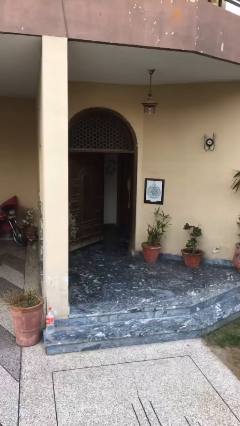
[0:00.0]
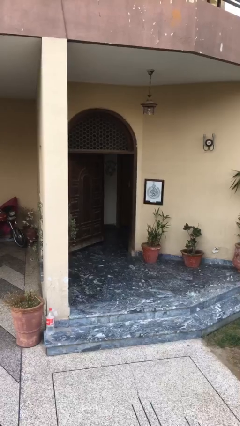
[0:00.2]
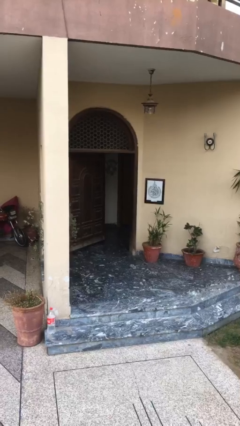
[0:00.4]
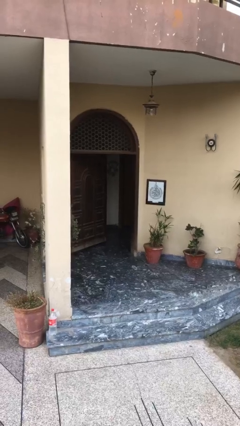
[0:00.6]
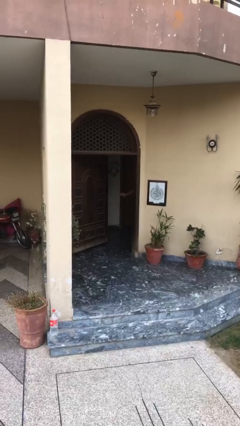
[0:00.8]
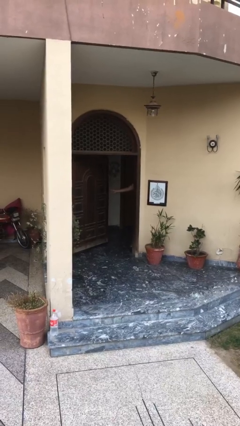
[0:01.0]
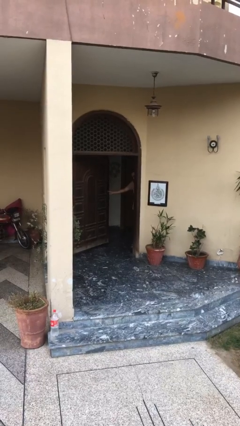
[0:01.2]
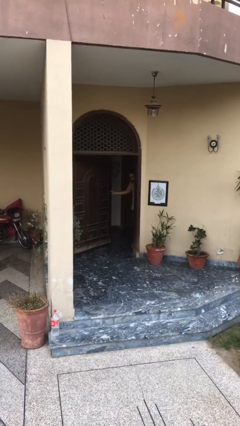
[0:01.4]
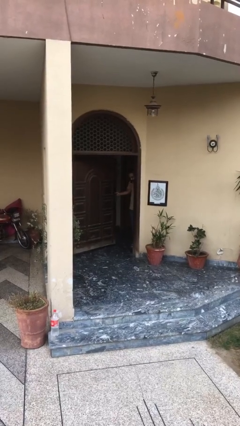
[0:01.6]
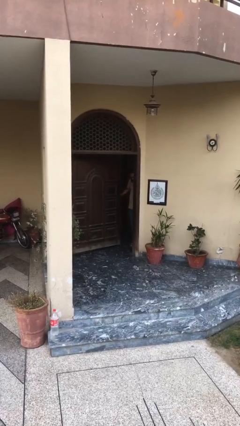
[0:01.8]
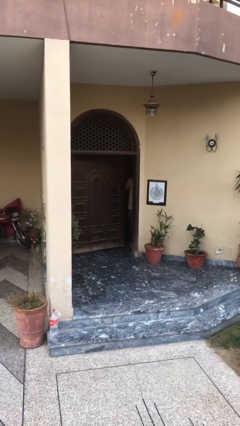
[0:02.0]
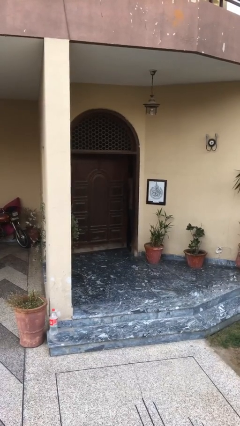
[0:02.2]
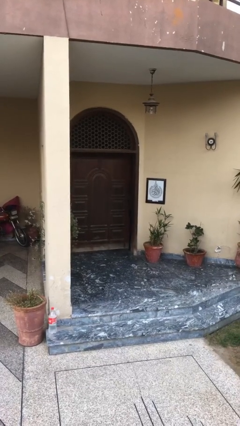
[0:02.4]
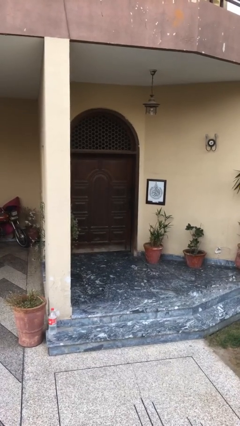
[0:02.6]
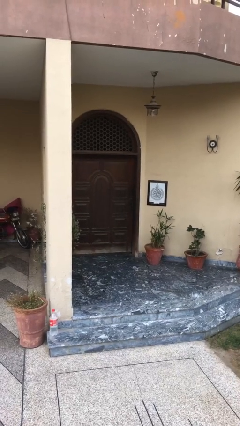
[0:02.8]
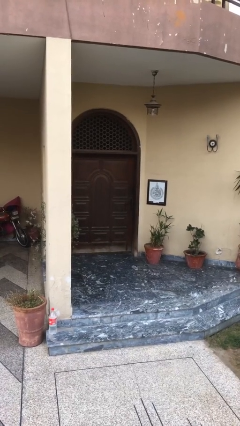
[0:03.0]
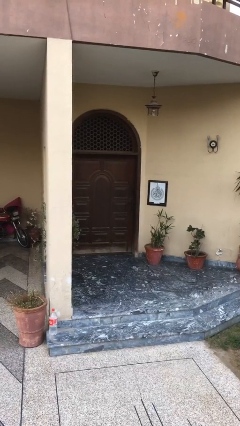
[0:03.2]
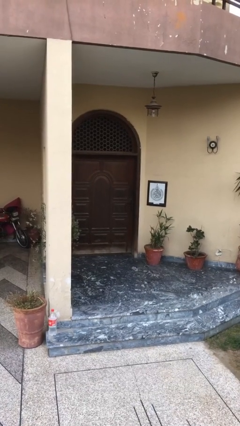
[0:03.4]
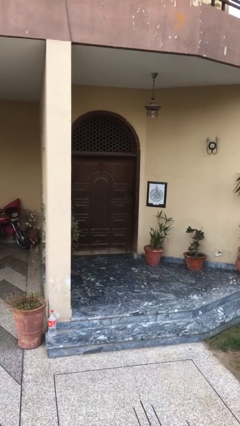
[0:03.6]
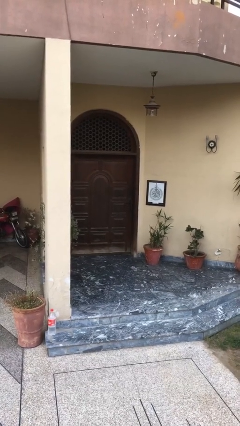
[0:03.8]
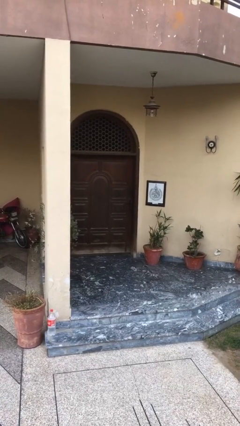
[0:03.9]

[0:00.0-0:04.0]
person closes facility door

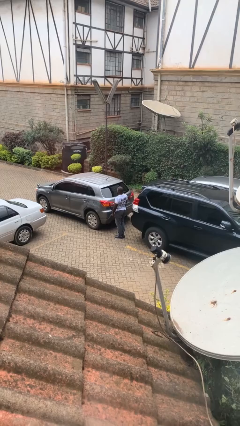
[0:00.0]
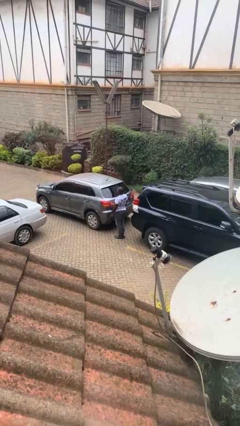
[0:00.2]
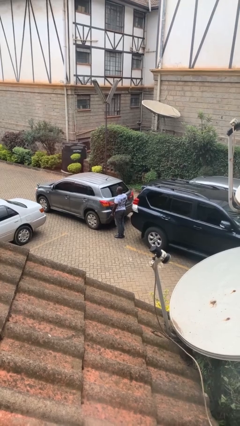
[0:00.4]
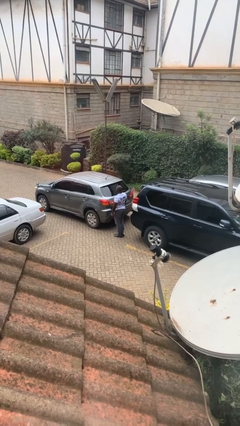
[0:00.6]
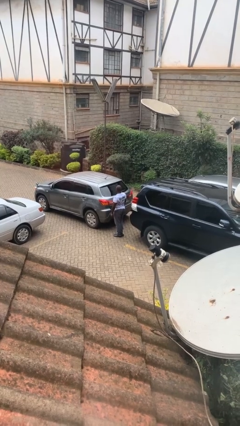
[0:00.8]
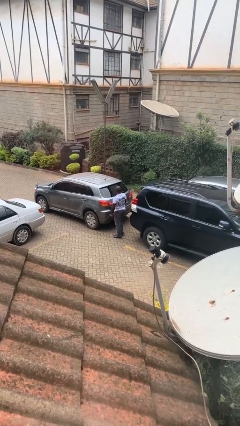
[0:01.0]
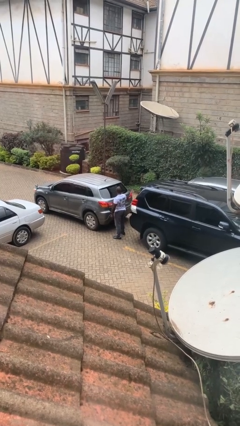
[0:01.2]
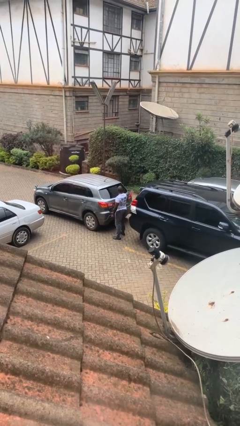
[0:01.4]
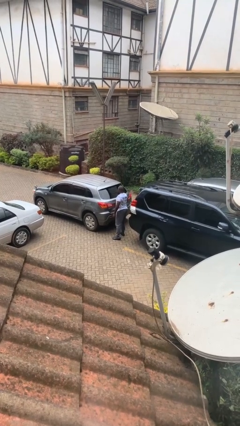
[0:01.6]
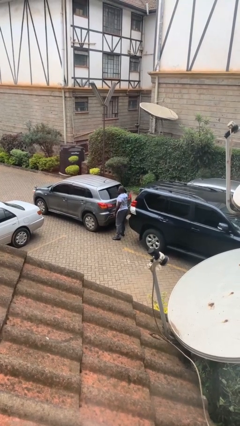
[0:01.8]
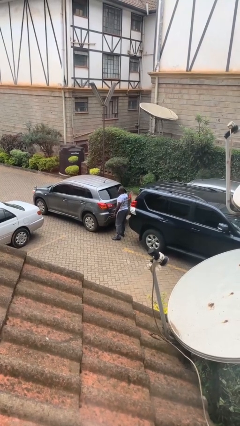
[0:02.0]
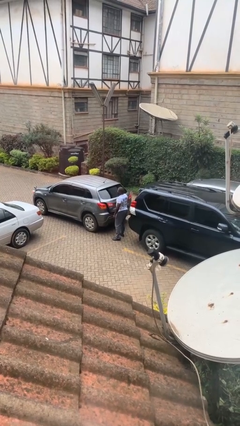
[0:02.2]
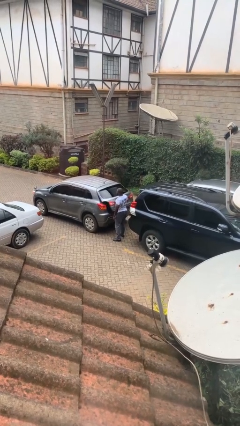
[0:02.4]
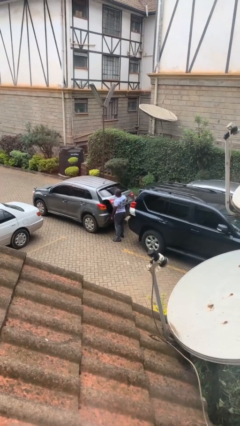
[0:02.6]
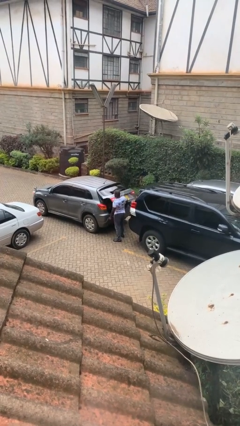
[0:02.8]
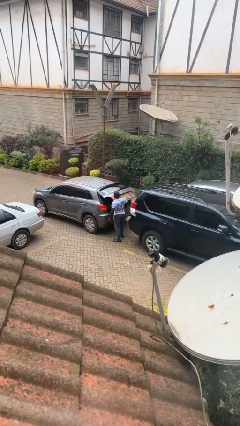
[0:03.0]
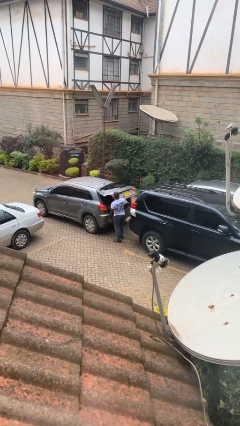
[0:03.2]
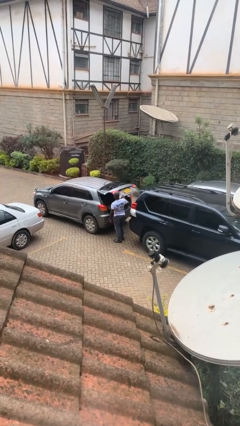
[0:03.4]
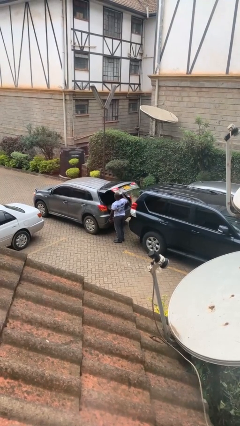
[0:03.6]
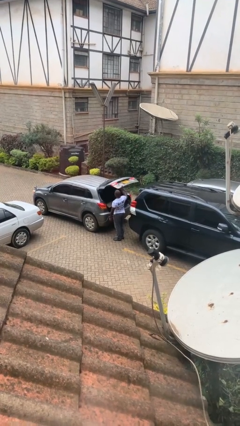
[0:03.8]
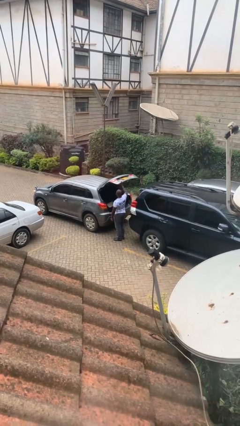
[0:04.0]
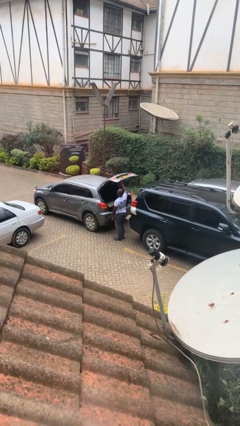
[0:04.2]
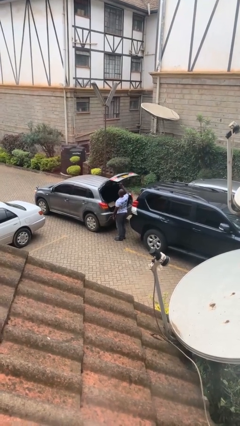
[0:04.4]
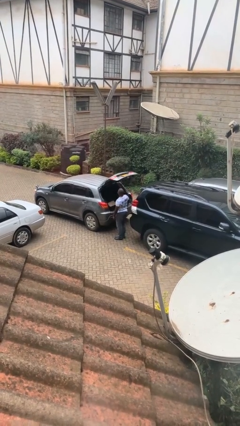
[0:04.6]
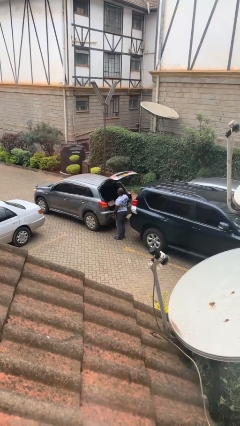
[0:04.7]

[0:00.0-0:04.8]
person opens car trunk

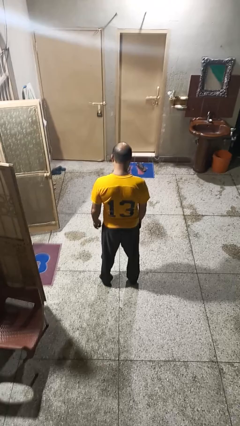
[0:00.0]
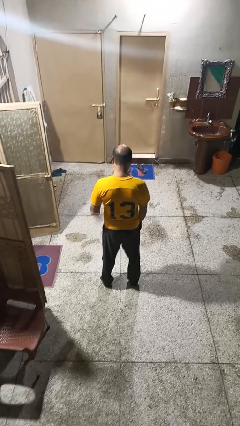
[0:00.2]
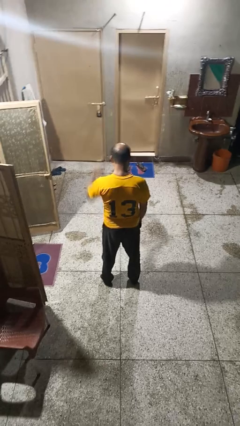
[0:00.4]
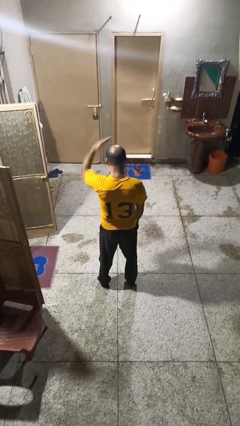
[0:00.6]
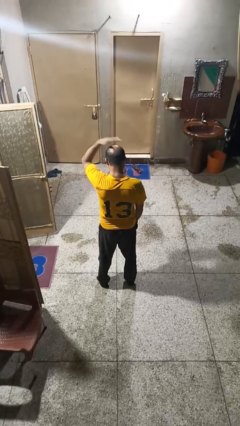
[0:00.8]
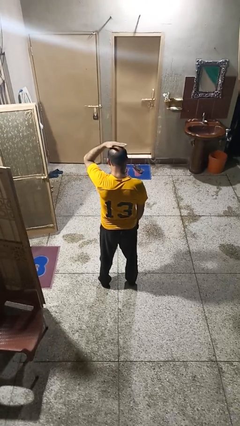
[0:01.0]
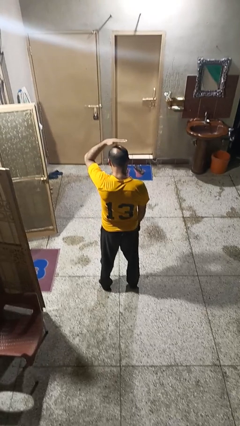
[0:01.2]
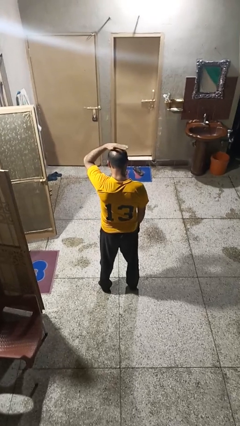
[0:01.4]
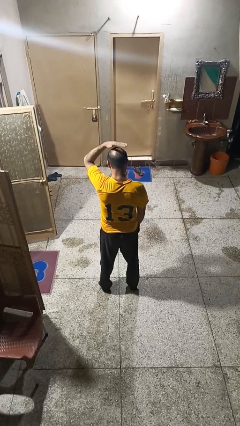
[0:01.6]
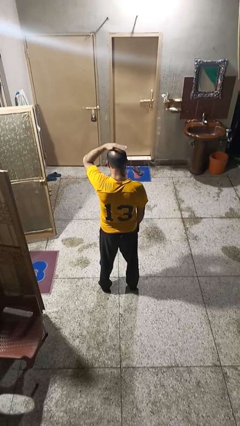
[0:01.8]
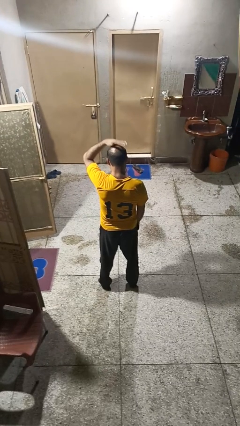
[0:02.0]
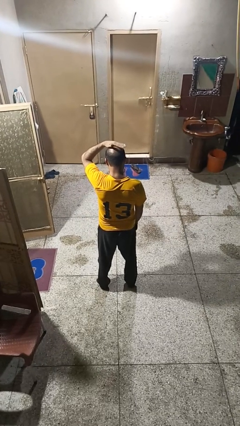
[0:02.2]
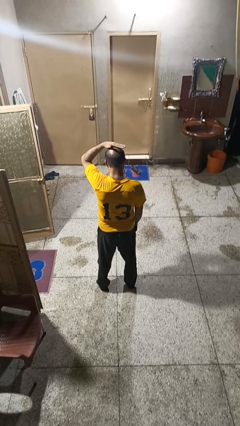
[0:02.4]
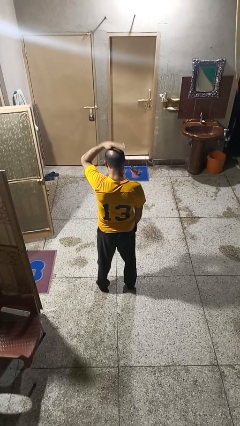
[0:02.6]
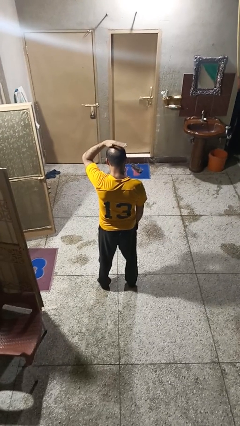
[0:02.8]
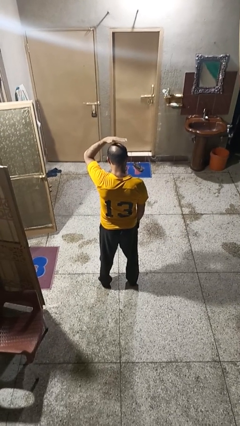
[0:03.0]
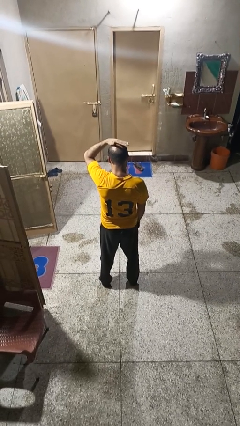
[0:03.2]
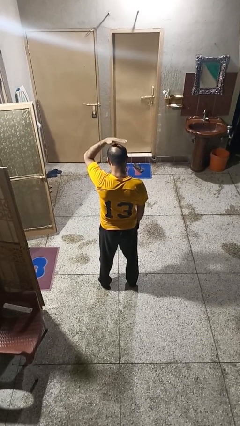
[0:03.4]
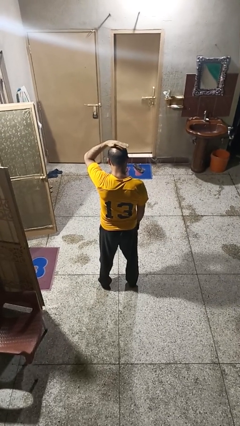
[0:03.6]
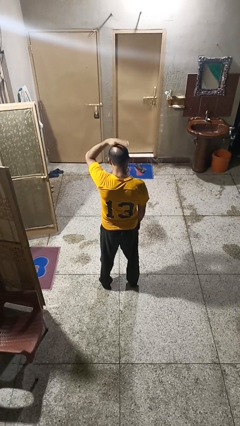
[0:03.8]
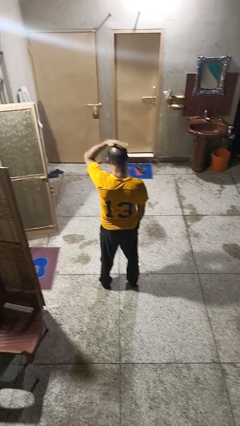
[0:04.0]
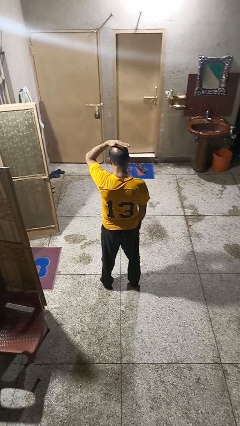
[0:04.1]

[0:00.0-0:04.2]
person pats head

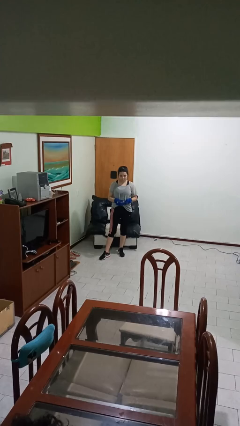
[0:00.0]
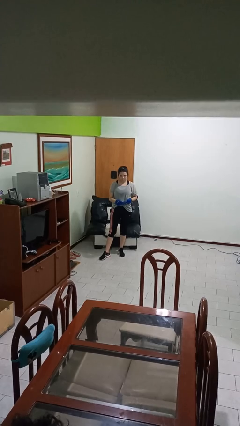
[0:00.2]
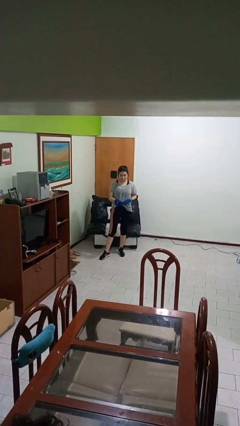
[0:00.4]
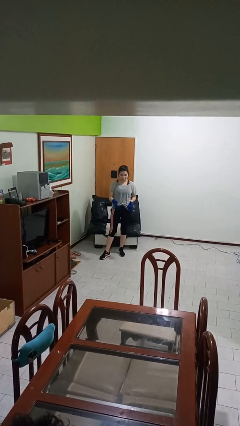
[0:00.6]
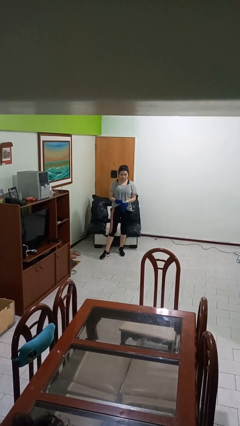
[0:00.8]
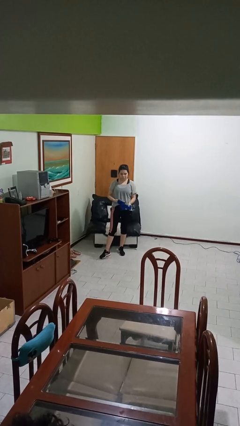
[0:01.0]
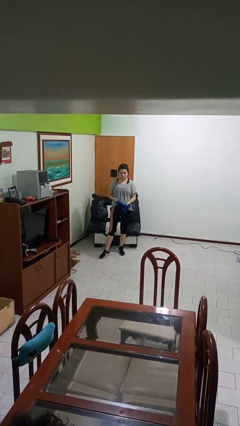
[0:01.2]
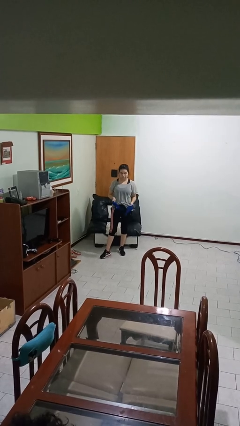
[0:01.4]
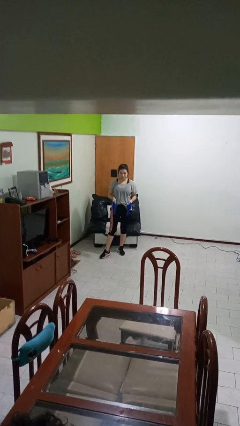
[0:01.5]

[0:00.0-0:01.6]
person takes off gloves

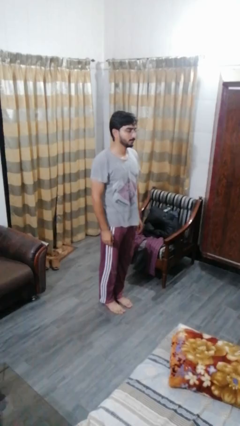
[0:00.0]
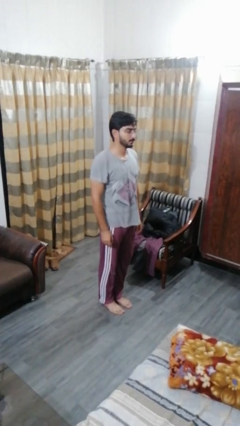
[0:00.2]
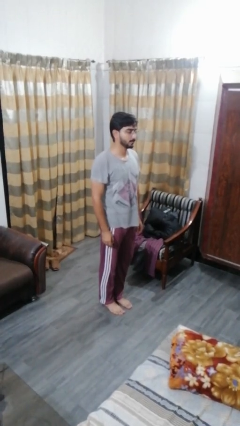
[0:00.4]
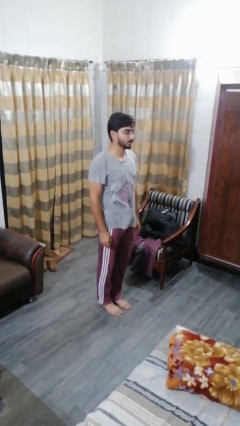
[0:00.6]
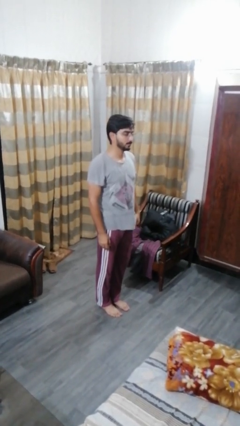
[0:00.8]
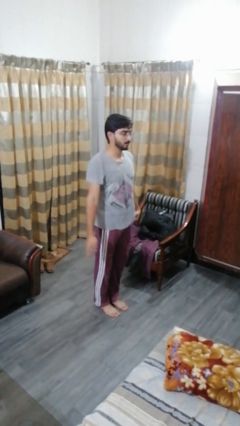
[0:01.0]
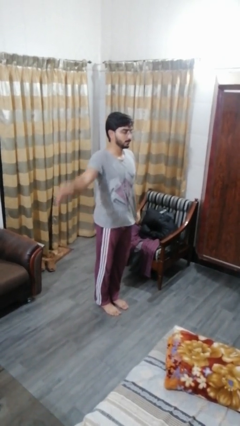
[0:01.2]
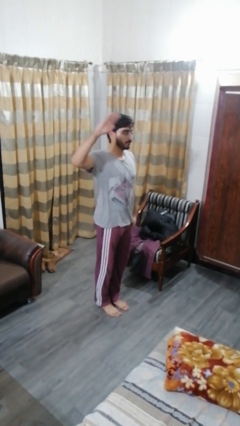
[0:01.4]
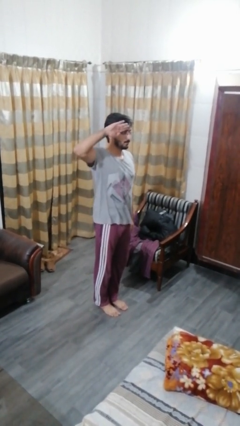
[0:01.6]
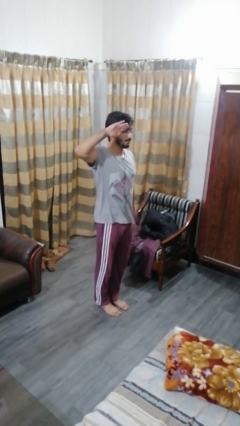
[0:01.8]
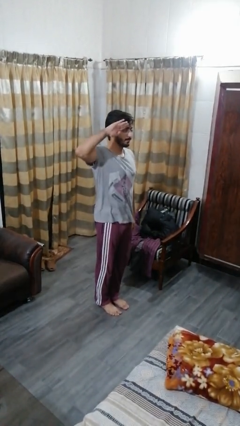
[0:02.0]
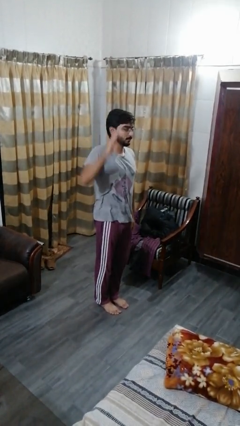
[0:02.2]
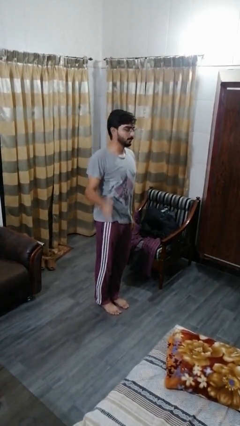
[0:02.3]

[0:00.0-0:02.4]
person salutes

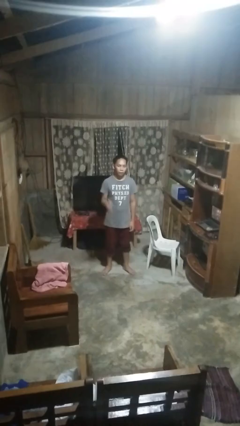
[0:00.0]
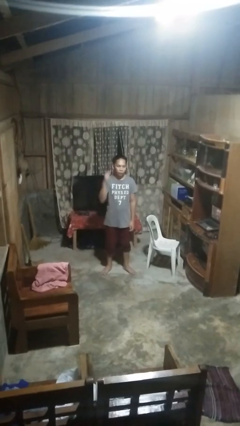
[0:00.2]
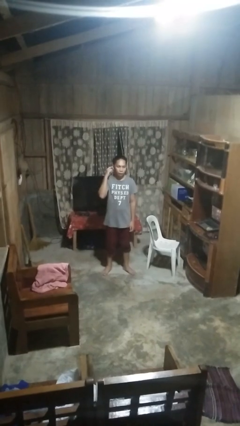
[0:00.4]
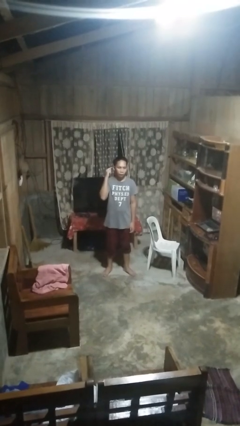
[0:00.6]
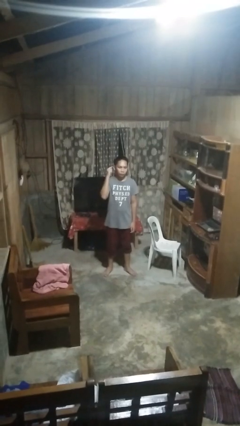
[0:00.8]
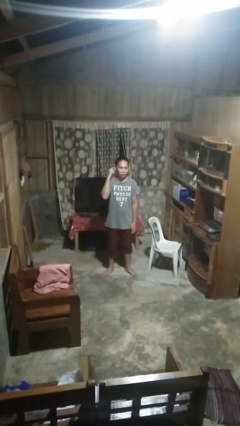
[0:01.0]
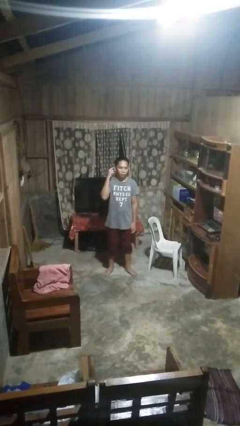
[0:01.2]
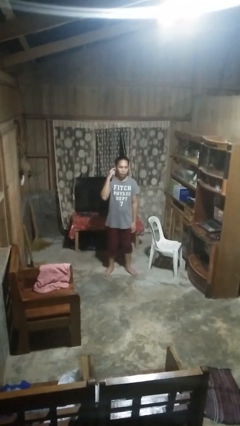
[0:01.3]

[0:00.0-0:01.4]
person gestures listen closely
